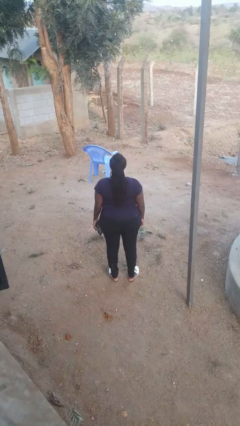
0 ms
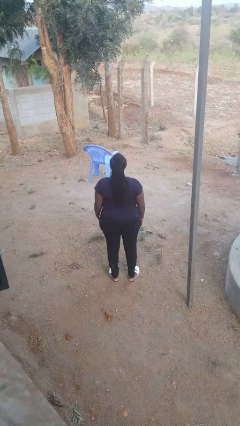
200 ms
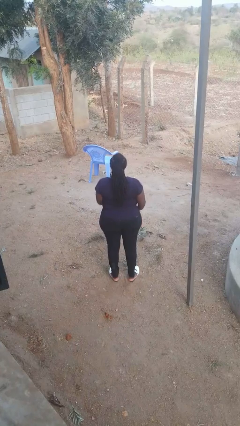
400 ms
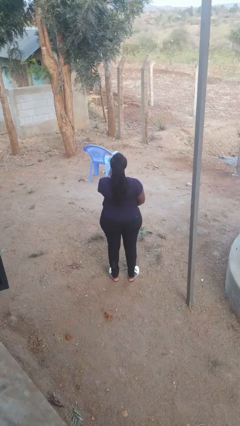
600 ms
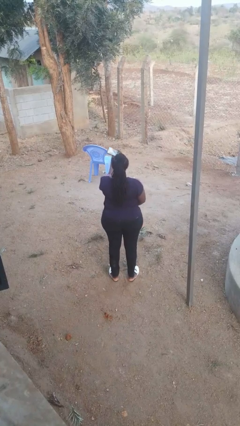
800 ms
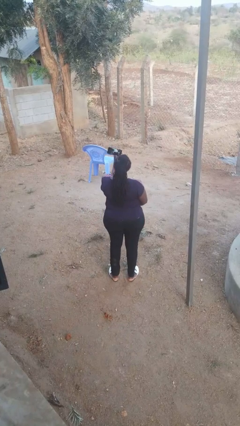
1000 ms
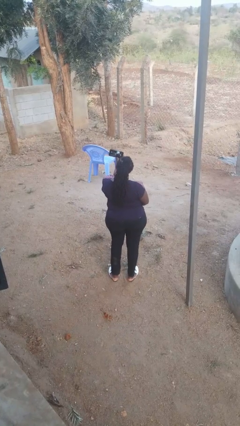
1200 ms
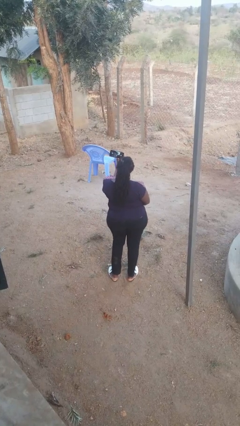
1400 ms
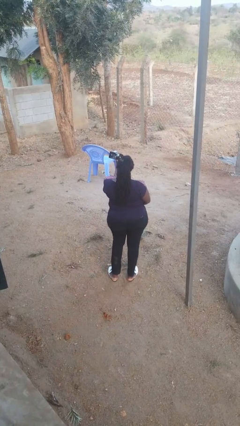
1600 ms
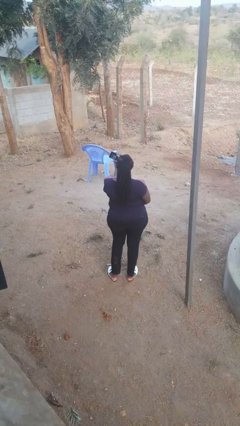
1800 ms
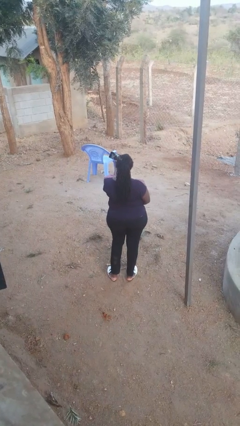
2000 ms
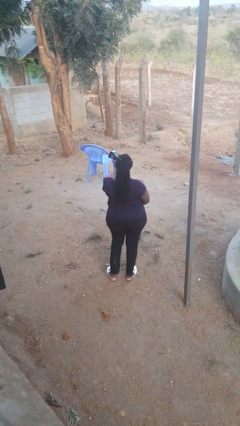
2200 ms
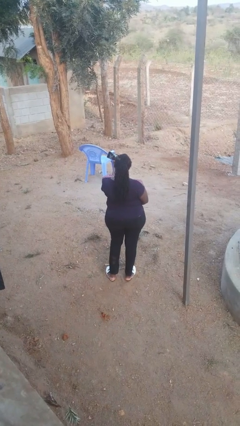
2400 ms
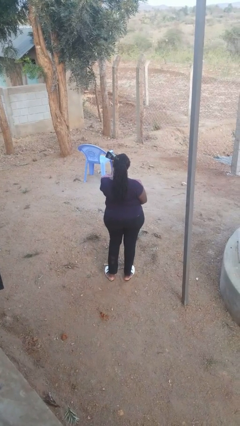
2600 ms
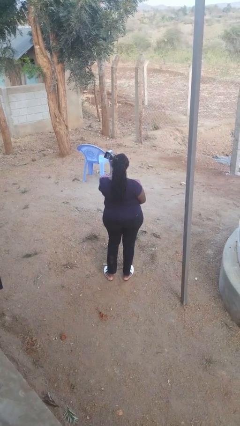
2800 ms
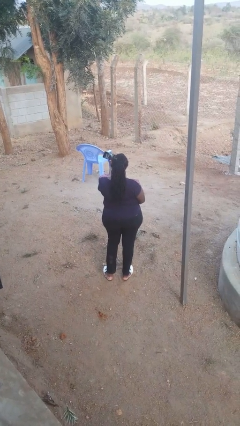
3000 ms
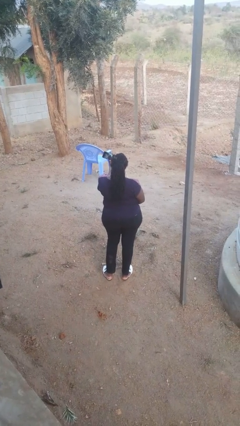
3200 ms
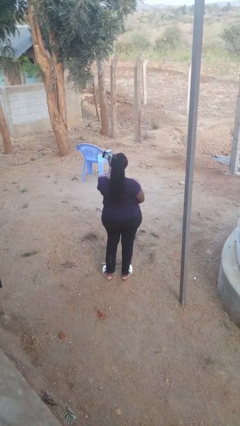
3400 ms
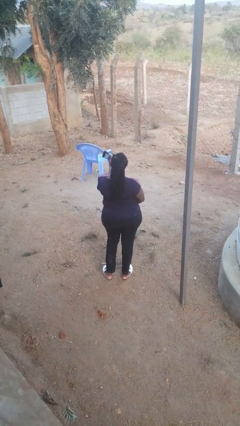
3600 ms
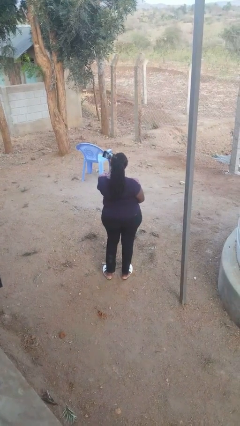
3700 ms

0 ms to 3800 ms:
person takes selfie

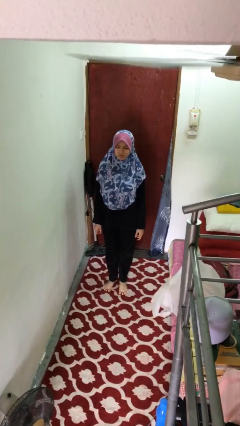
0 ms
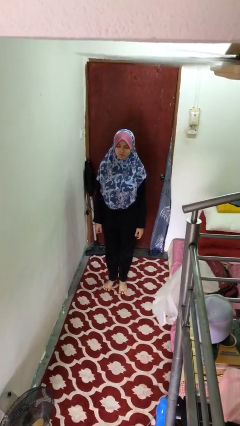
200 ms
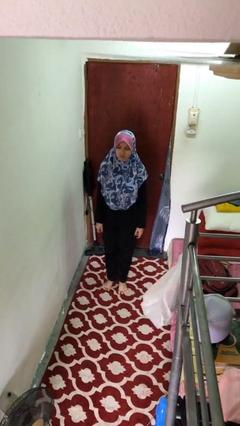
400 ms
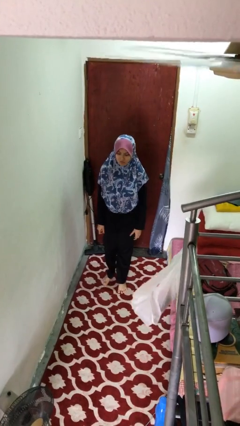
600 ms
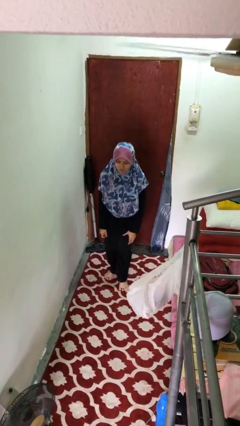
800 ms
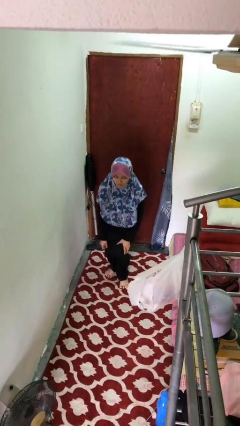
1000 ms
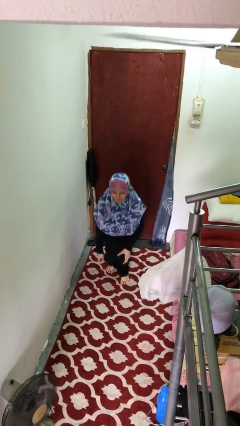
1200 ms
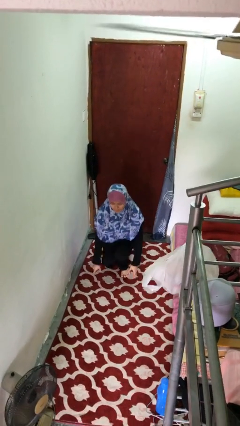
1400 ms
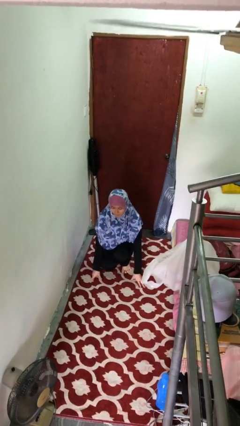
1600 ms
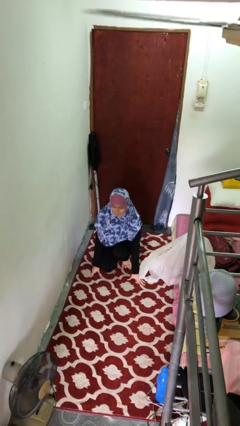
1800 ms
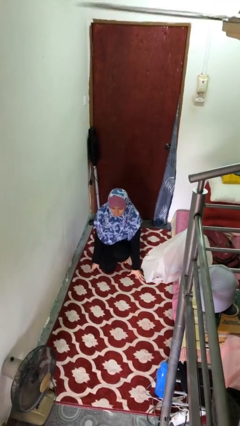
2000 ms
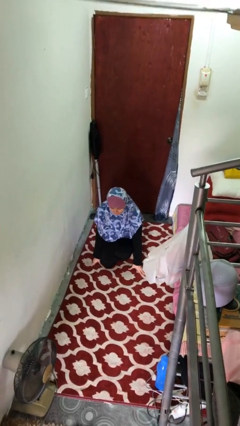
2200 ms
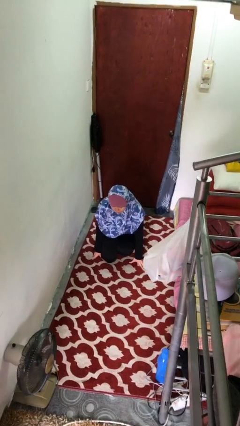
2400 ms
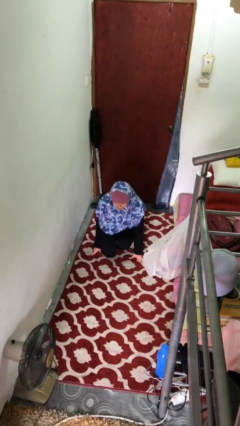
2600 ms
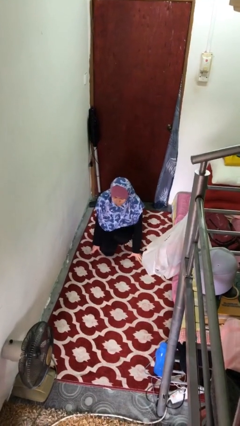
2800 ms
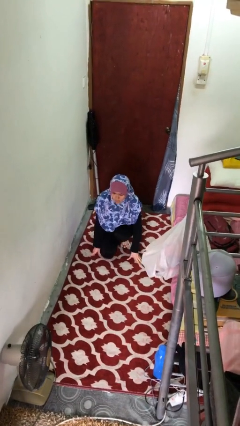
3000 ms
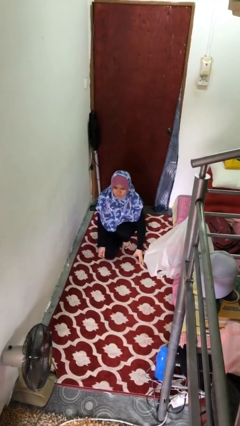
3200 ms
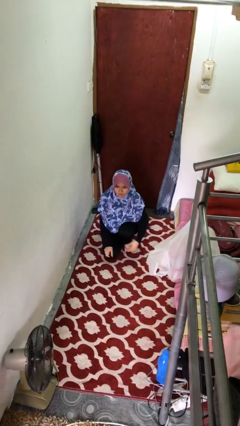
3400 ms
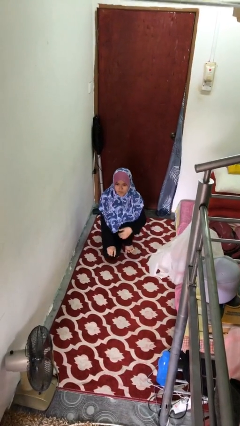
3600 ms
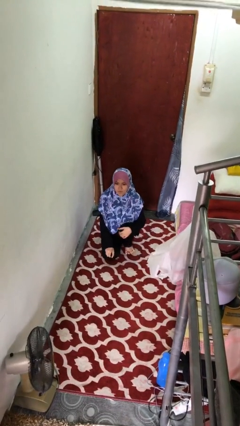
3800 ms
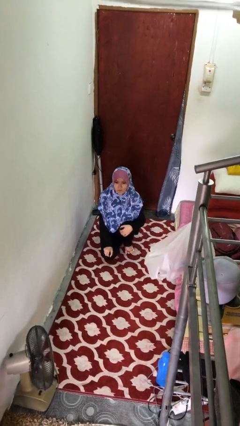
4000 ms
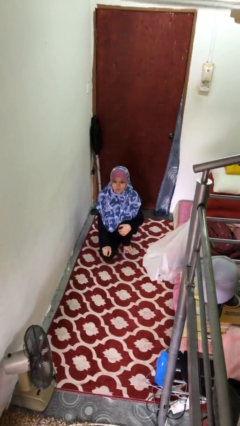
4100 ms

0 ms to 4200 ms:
person kneels

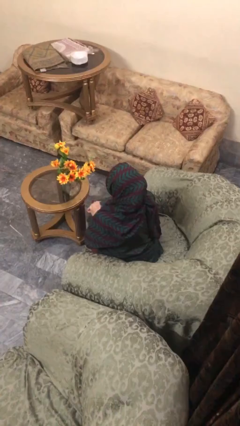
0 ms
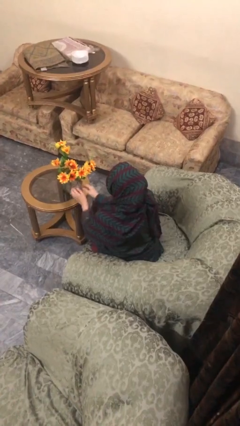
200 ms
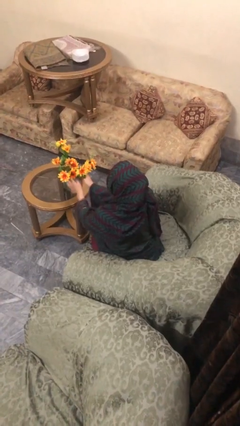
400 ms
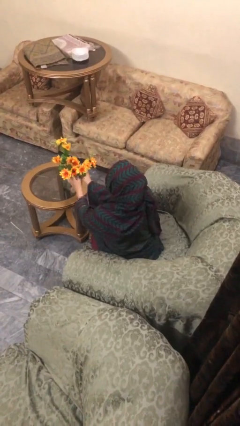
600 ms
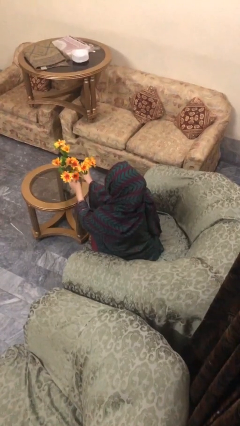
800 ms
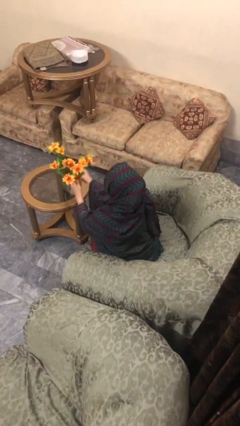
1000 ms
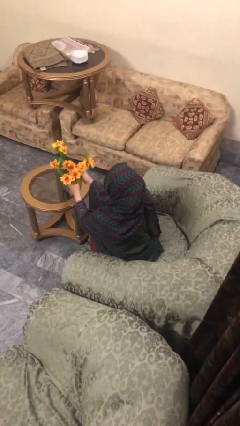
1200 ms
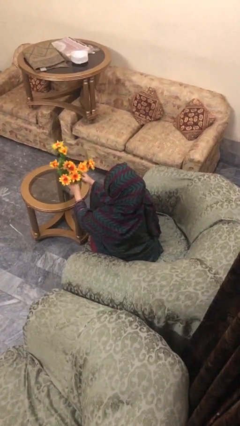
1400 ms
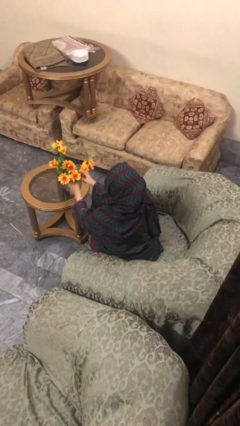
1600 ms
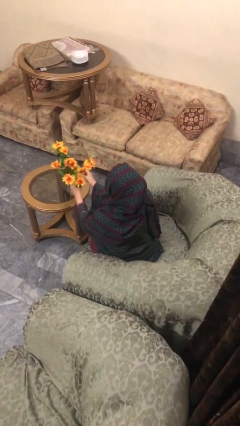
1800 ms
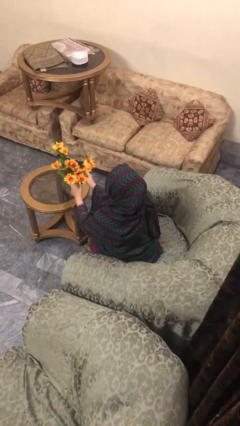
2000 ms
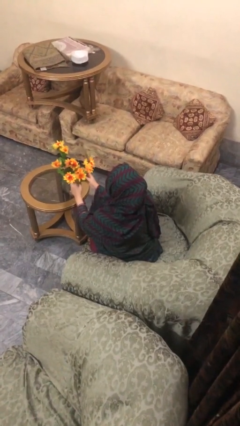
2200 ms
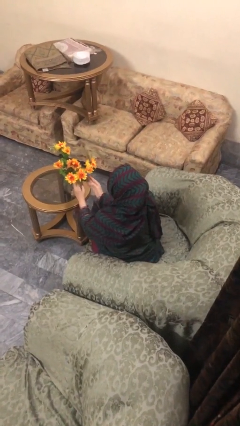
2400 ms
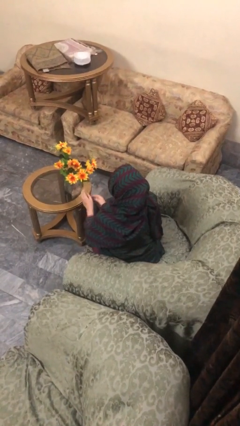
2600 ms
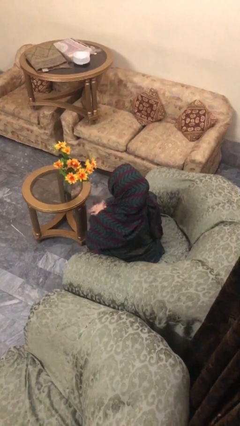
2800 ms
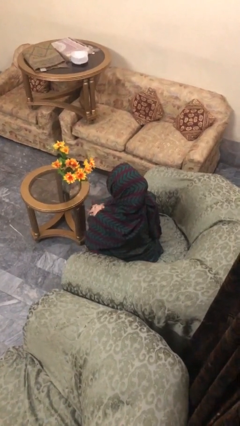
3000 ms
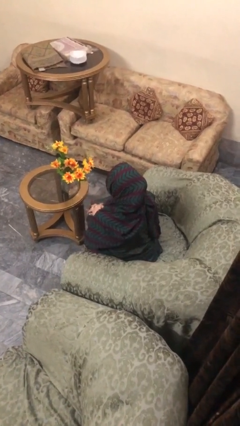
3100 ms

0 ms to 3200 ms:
person arranges flowers in vase

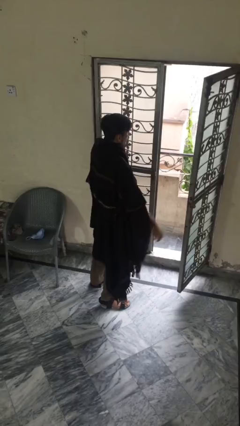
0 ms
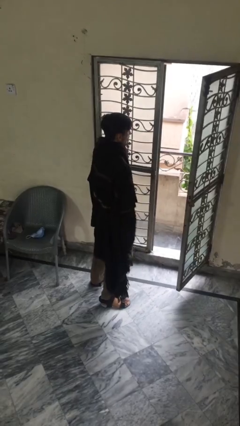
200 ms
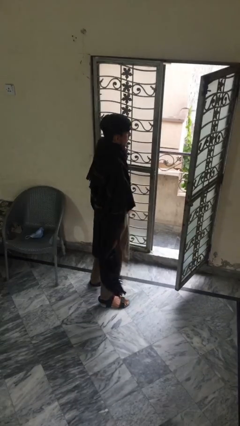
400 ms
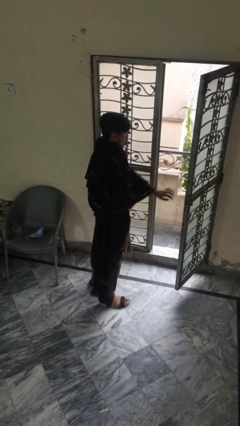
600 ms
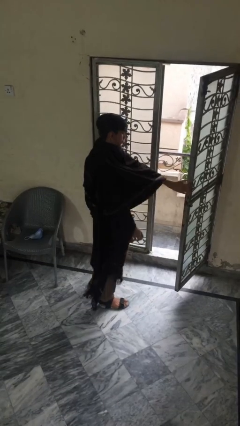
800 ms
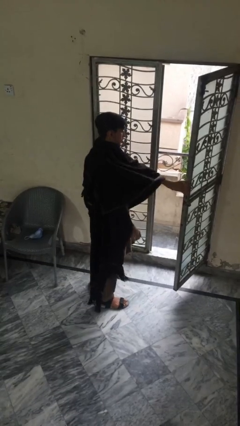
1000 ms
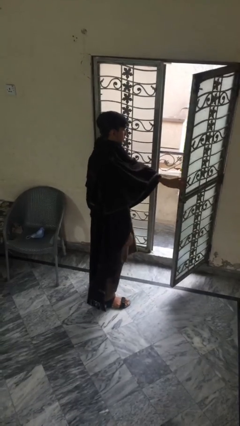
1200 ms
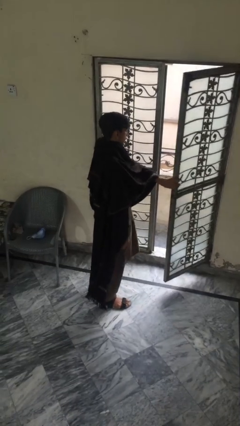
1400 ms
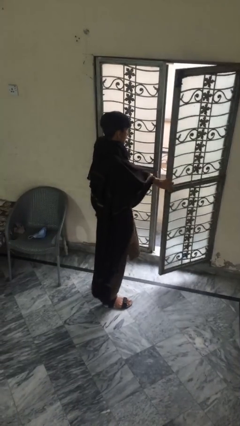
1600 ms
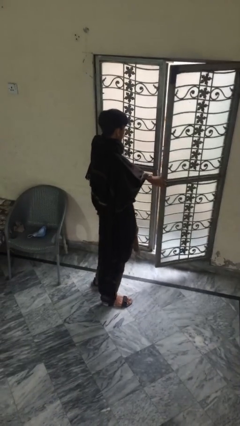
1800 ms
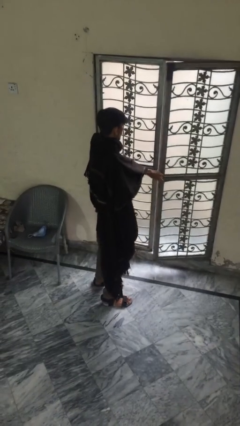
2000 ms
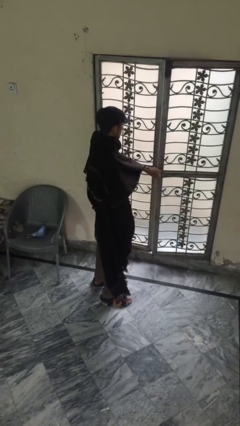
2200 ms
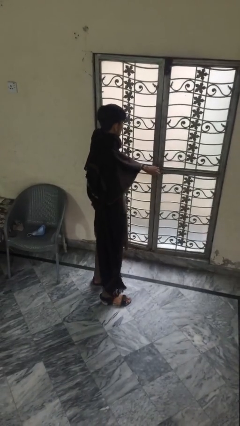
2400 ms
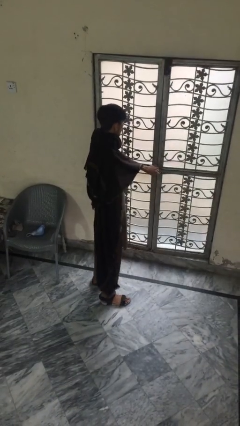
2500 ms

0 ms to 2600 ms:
person closes facility door

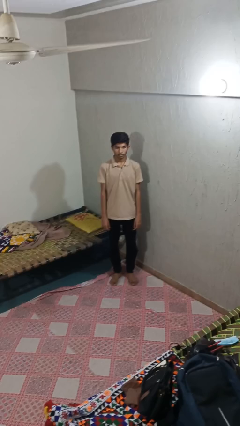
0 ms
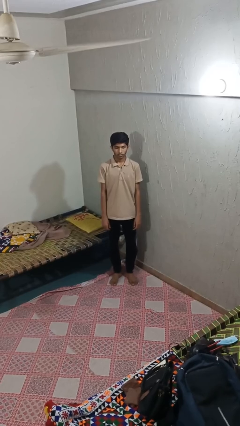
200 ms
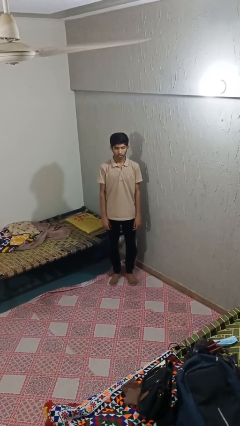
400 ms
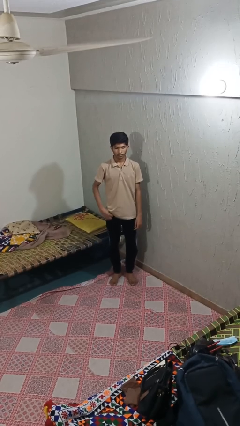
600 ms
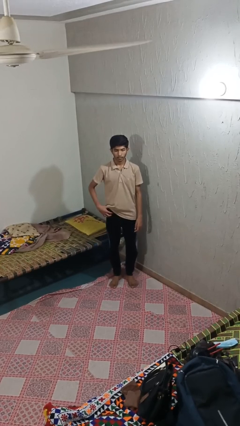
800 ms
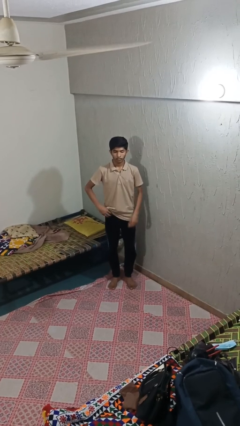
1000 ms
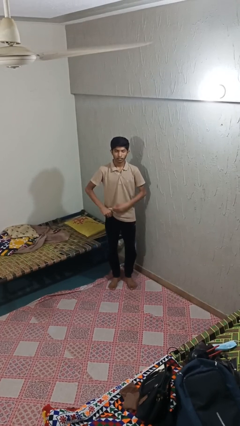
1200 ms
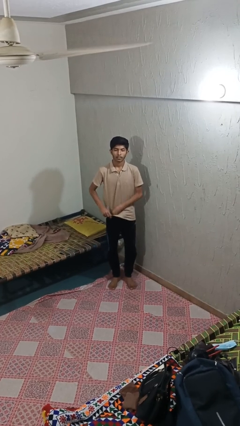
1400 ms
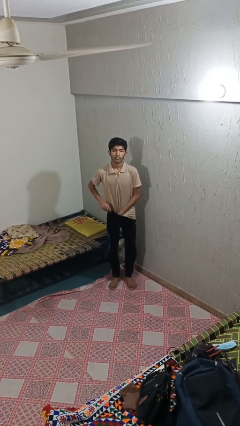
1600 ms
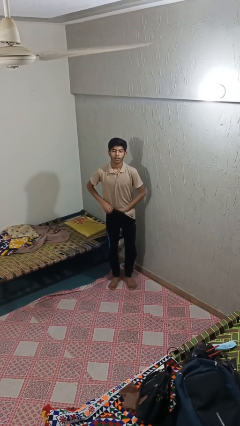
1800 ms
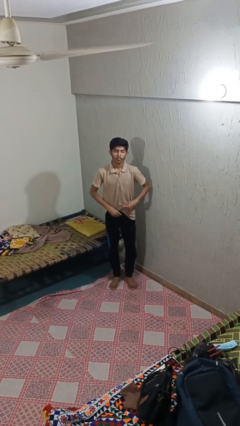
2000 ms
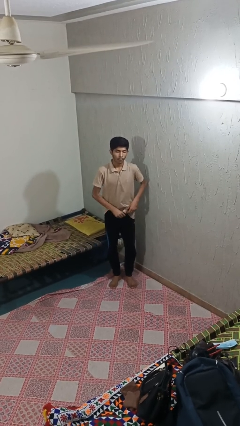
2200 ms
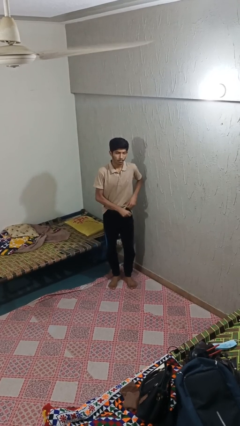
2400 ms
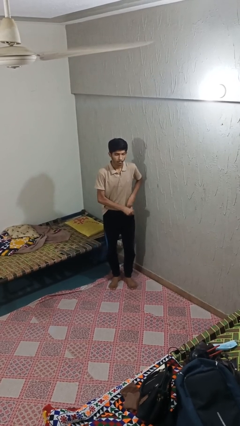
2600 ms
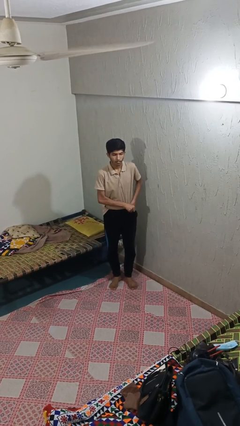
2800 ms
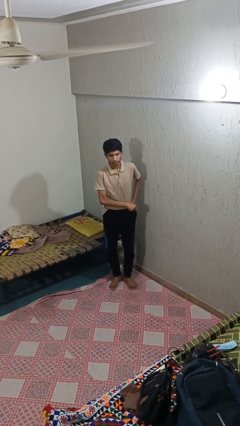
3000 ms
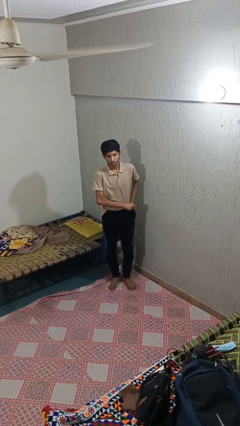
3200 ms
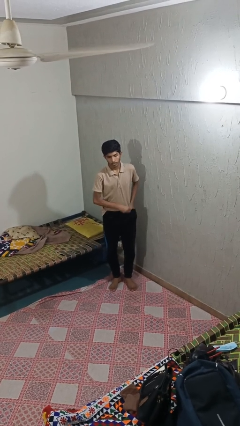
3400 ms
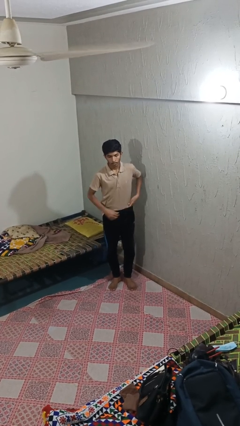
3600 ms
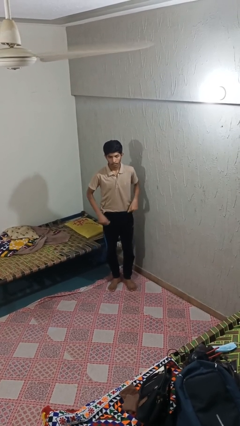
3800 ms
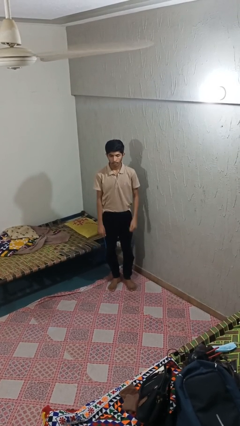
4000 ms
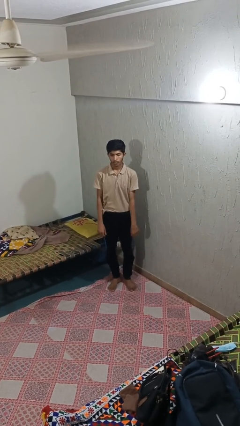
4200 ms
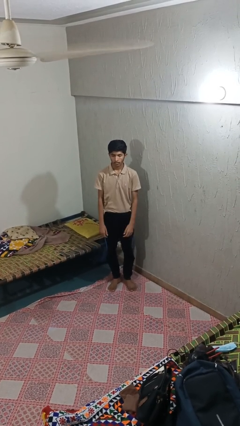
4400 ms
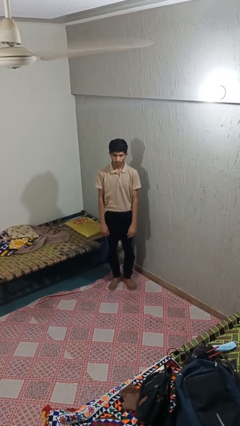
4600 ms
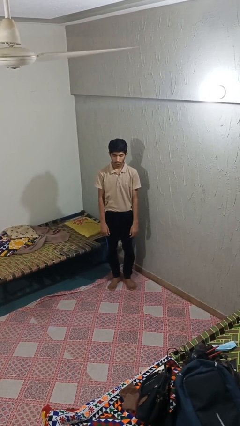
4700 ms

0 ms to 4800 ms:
person tucks in shirt
